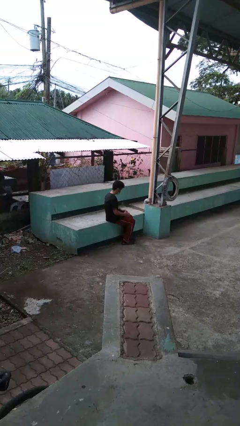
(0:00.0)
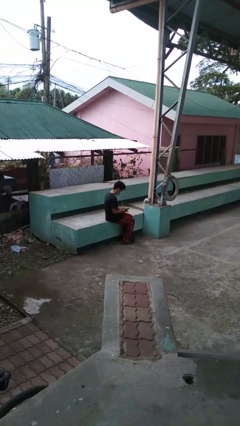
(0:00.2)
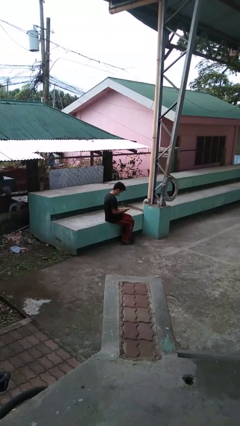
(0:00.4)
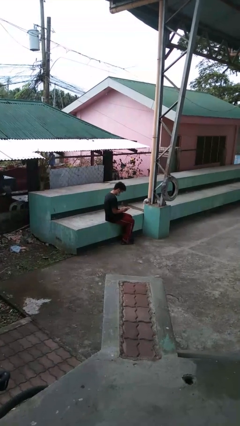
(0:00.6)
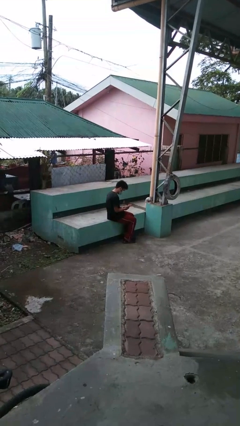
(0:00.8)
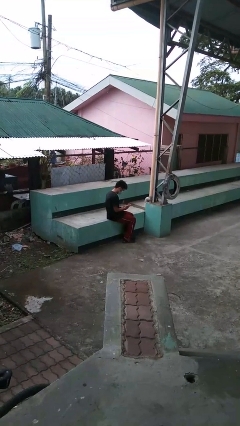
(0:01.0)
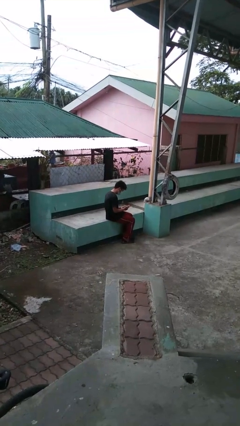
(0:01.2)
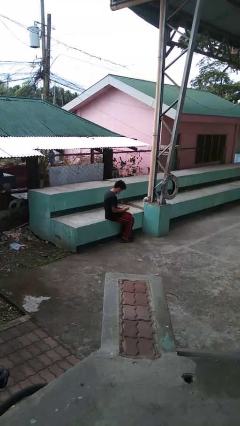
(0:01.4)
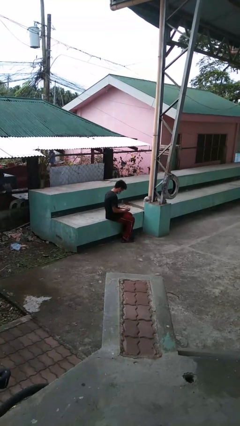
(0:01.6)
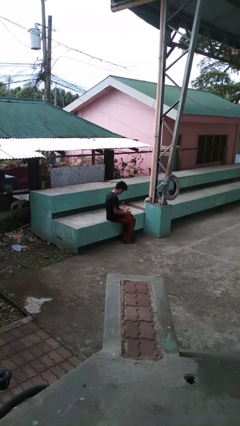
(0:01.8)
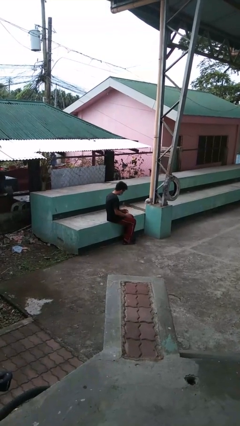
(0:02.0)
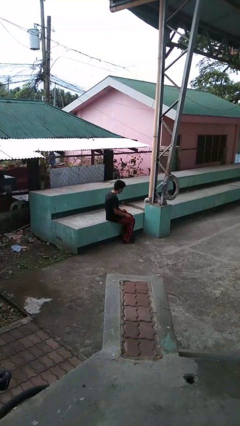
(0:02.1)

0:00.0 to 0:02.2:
person looks at hands in lap

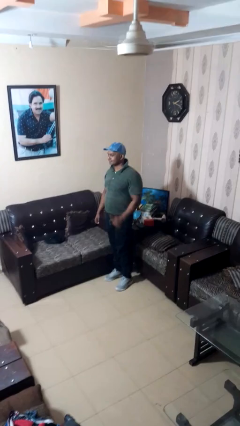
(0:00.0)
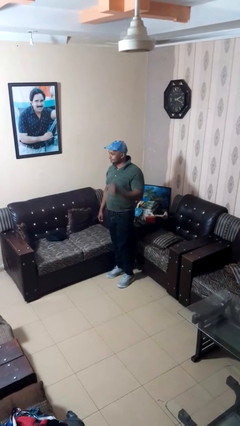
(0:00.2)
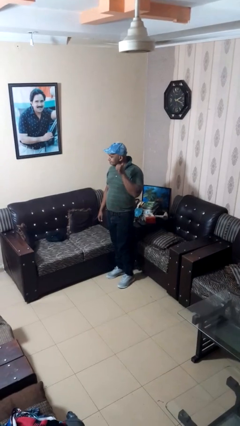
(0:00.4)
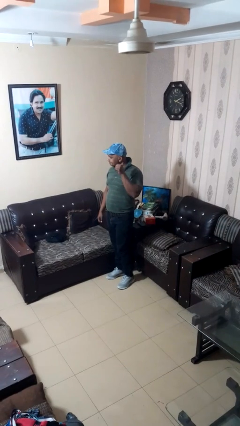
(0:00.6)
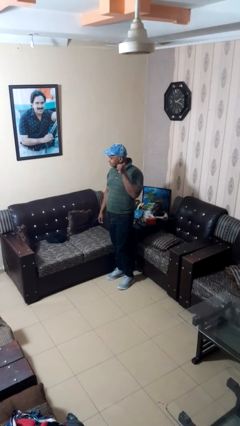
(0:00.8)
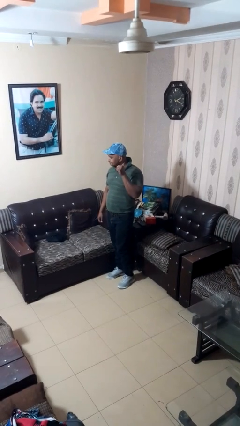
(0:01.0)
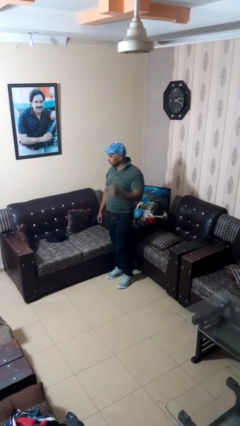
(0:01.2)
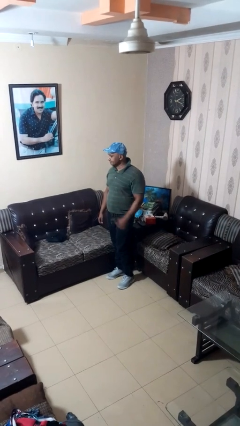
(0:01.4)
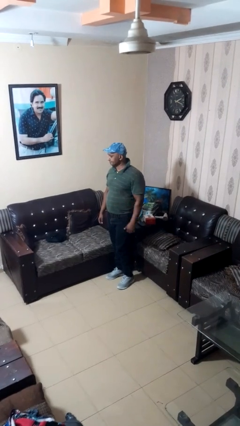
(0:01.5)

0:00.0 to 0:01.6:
person gestures behind me

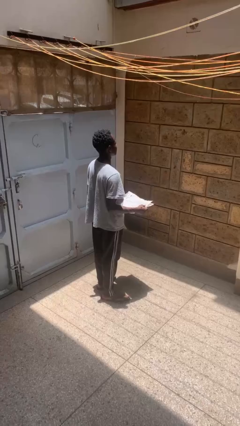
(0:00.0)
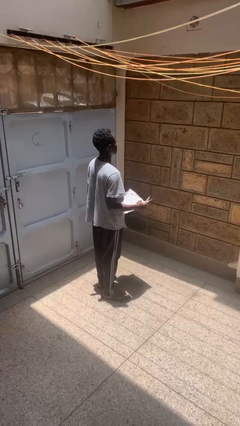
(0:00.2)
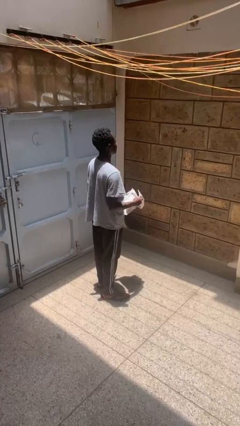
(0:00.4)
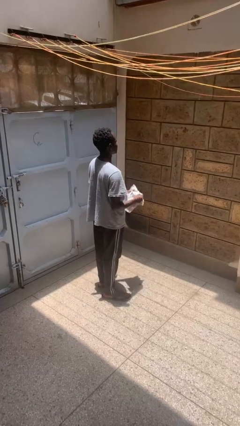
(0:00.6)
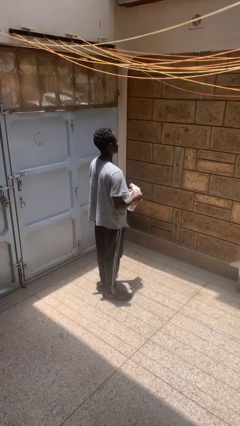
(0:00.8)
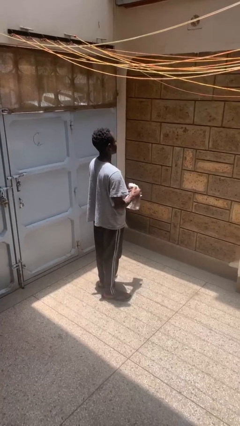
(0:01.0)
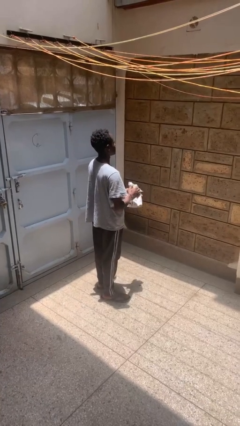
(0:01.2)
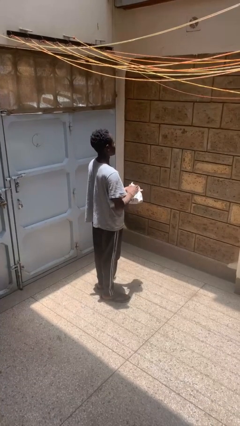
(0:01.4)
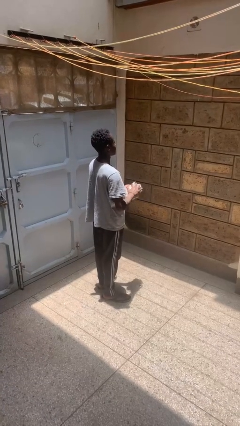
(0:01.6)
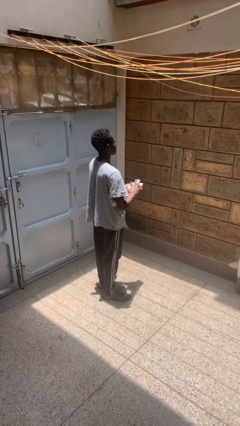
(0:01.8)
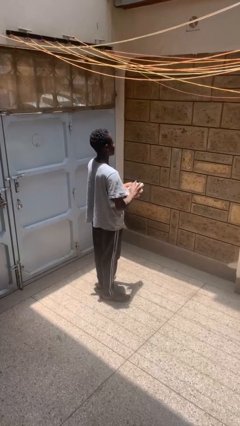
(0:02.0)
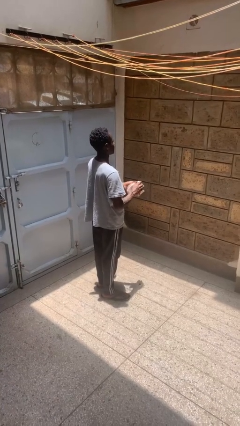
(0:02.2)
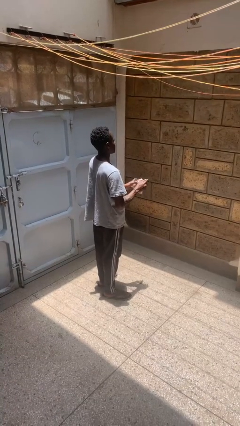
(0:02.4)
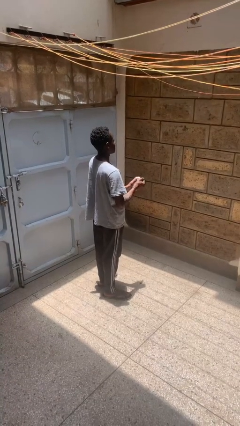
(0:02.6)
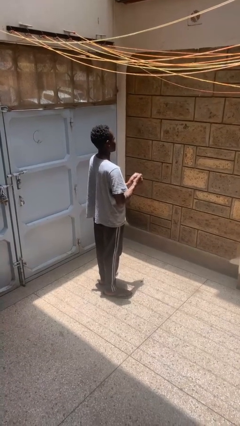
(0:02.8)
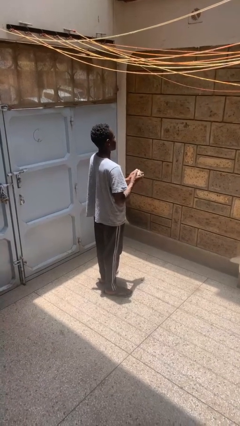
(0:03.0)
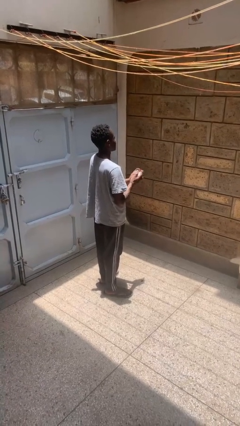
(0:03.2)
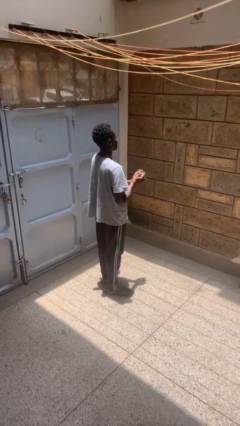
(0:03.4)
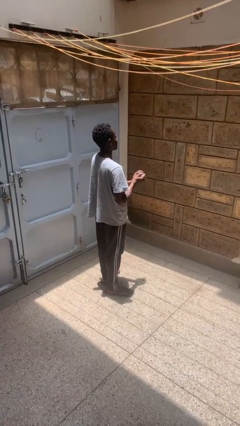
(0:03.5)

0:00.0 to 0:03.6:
person crumples paper

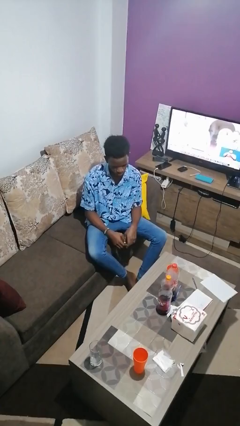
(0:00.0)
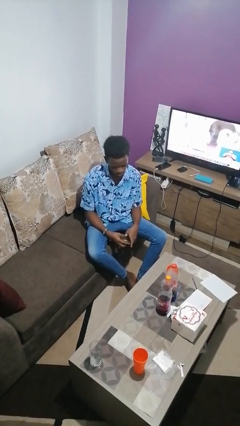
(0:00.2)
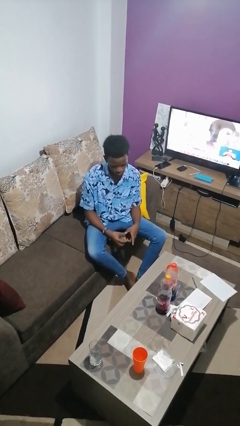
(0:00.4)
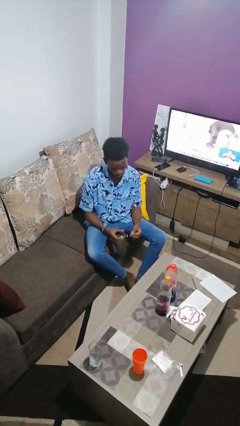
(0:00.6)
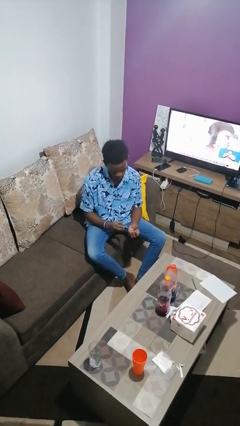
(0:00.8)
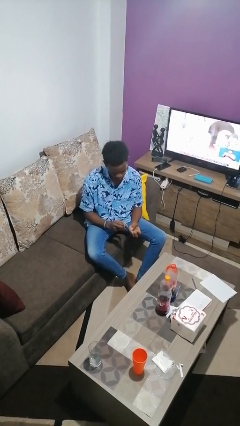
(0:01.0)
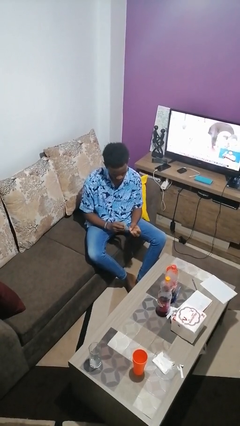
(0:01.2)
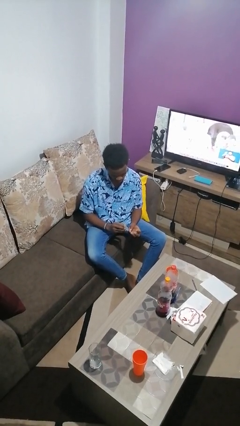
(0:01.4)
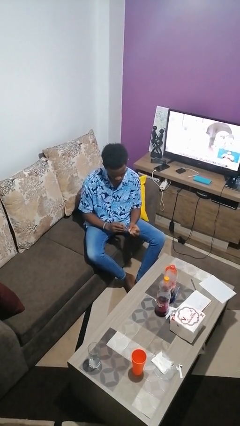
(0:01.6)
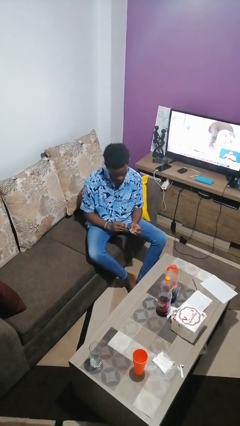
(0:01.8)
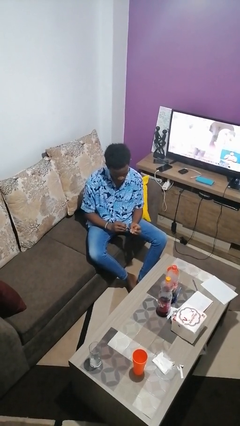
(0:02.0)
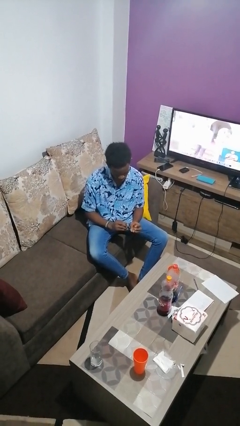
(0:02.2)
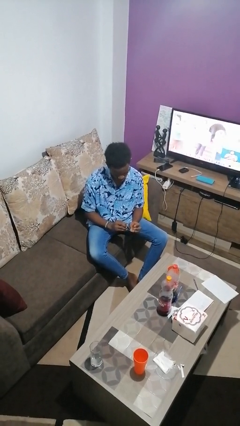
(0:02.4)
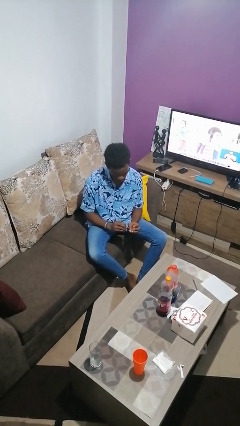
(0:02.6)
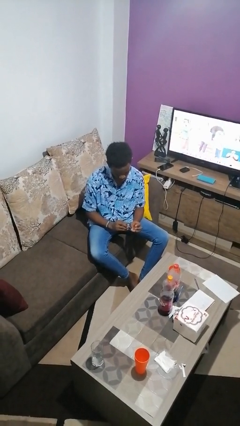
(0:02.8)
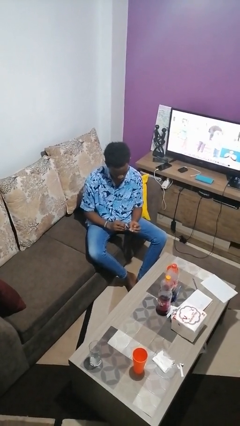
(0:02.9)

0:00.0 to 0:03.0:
person clips fingernails

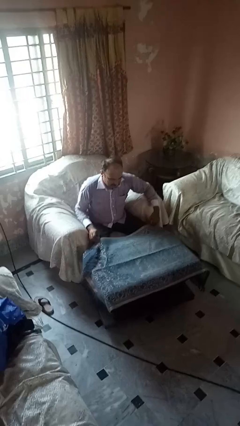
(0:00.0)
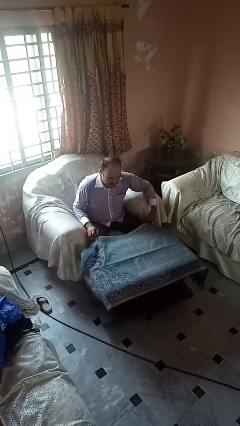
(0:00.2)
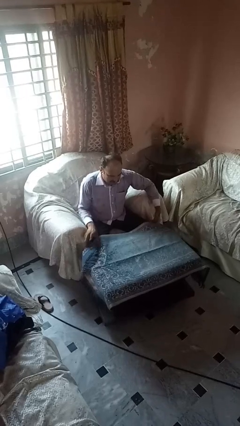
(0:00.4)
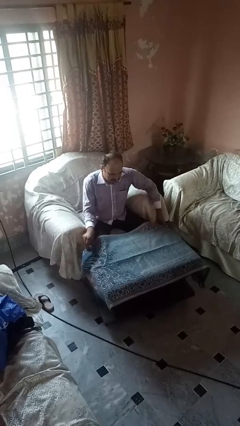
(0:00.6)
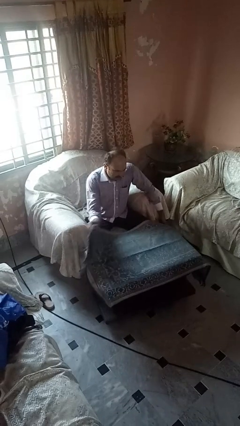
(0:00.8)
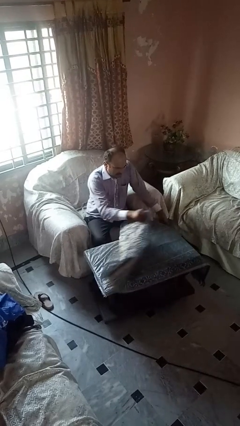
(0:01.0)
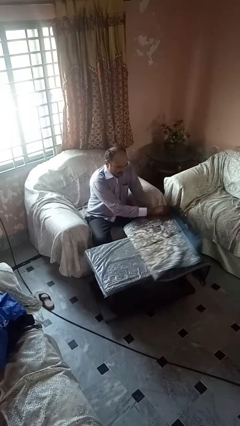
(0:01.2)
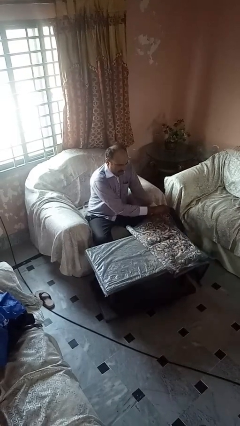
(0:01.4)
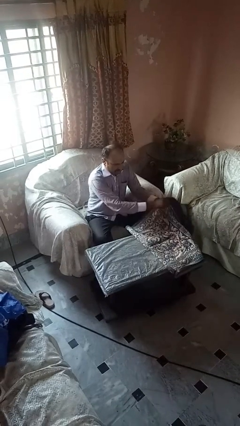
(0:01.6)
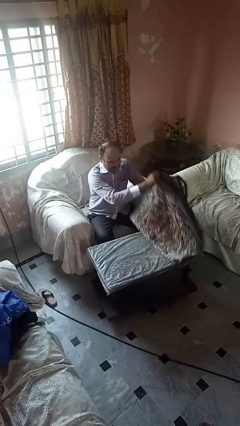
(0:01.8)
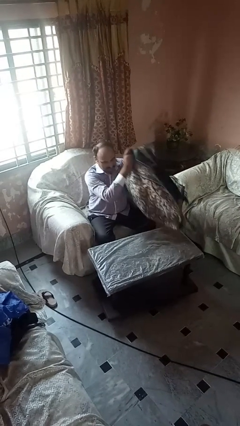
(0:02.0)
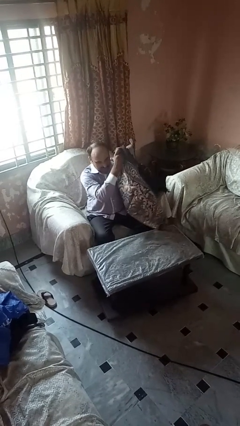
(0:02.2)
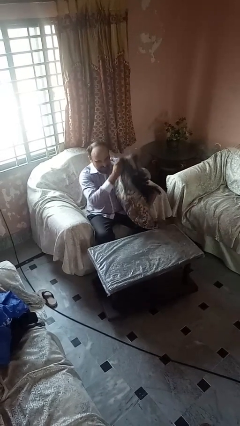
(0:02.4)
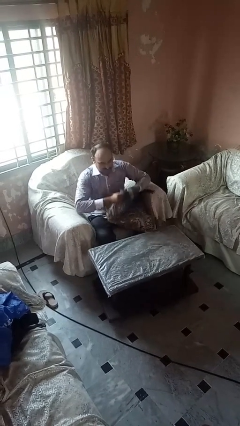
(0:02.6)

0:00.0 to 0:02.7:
person folds tablecloth

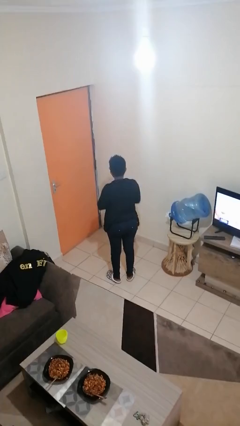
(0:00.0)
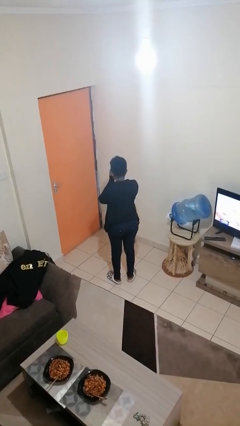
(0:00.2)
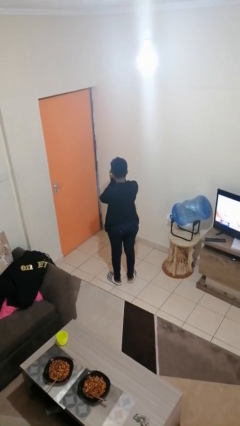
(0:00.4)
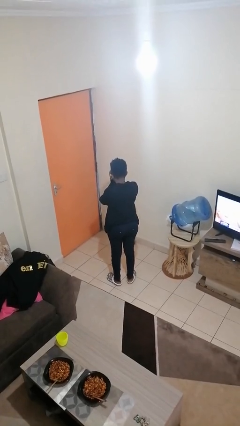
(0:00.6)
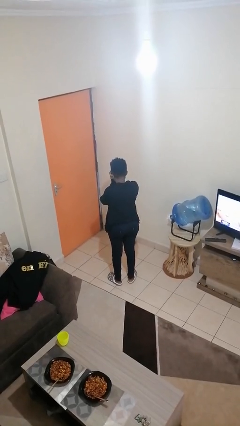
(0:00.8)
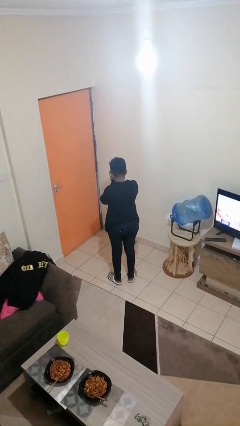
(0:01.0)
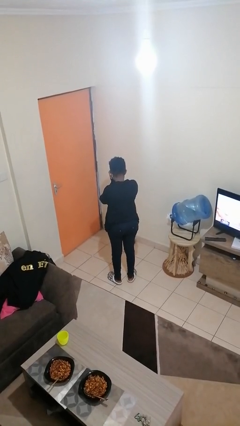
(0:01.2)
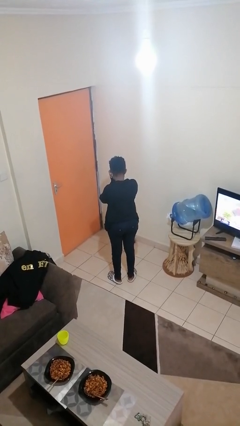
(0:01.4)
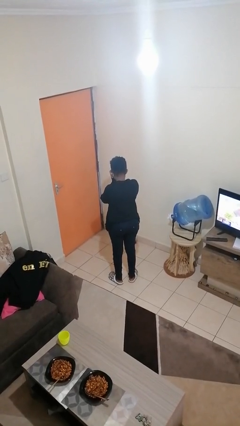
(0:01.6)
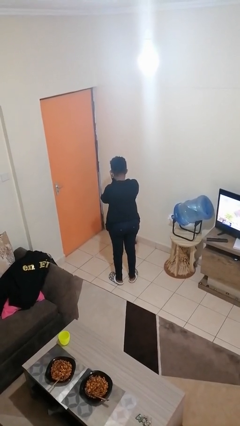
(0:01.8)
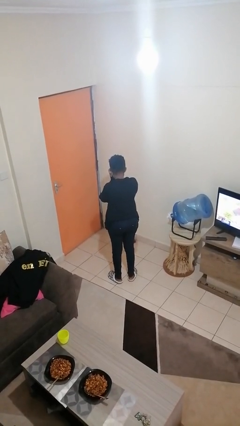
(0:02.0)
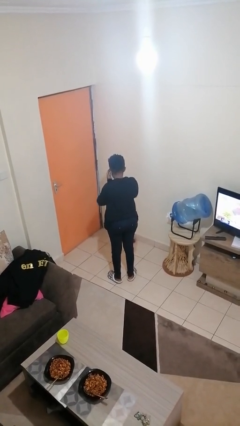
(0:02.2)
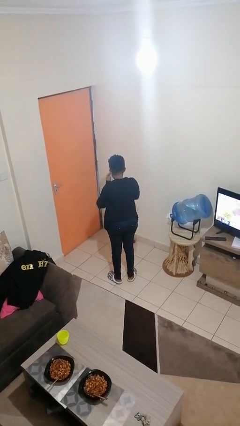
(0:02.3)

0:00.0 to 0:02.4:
person covers face with hands

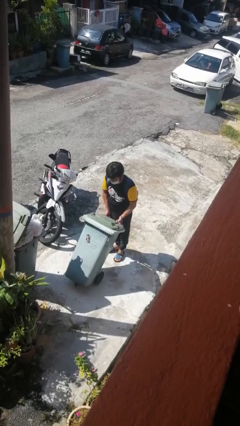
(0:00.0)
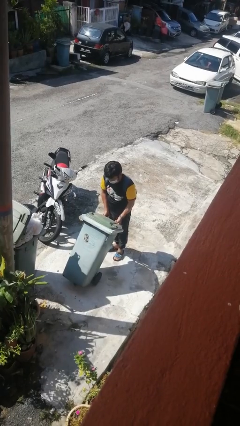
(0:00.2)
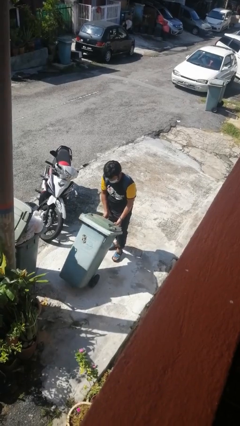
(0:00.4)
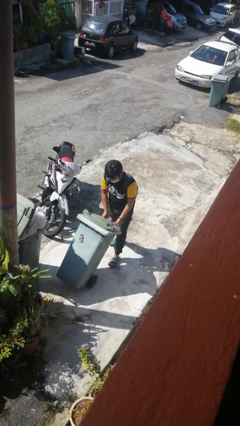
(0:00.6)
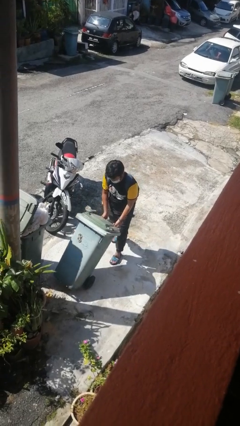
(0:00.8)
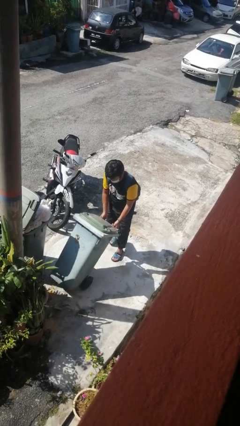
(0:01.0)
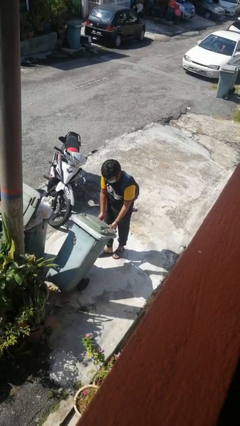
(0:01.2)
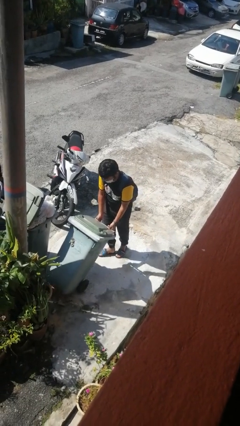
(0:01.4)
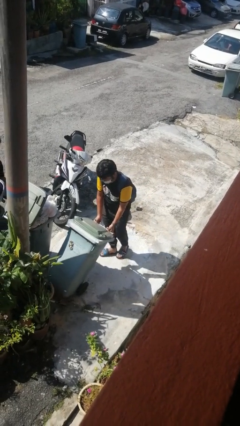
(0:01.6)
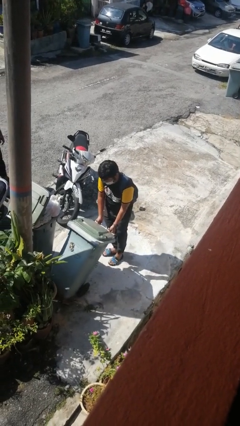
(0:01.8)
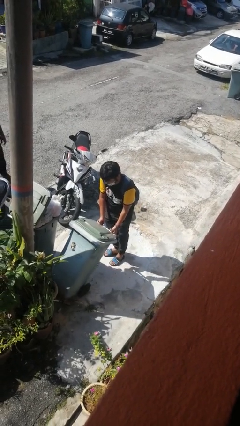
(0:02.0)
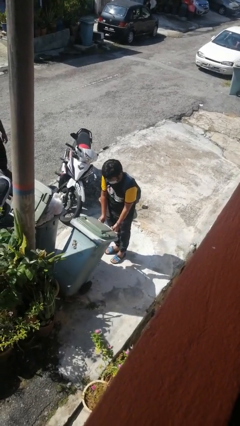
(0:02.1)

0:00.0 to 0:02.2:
person pushes wheeled trashcan
